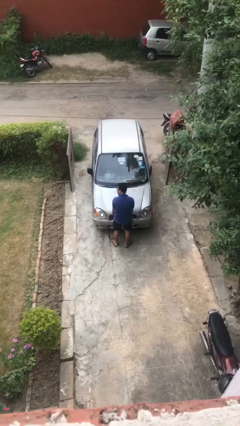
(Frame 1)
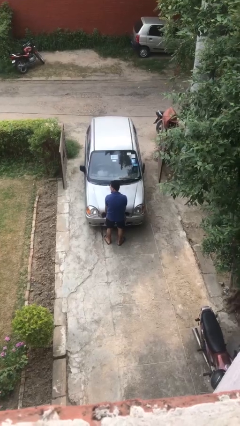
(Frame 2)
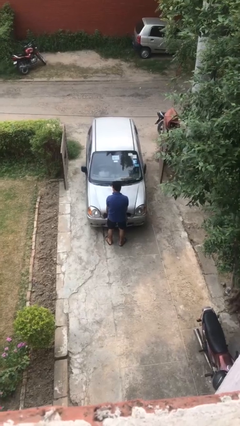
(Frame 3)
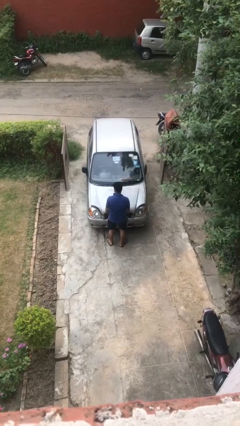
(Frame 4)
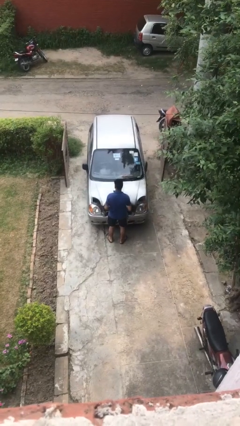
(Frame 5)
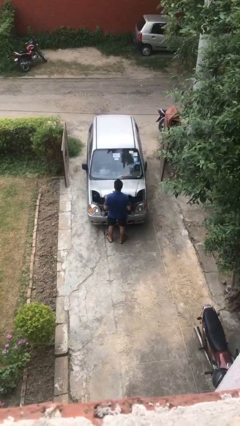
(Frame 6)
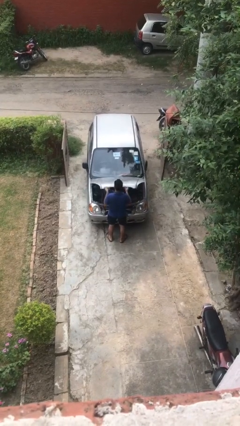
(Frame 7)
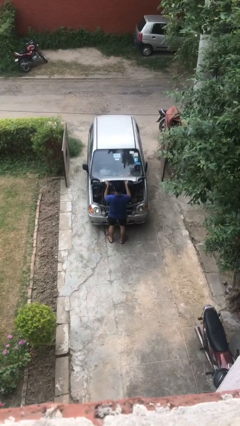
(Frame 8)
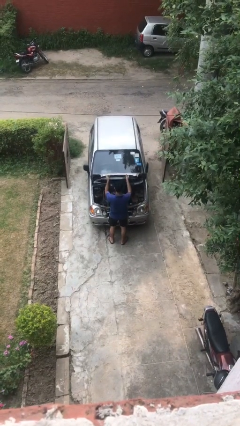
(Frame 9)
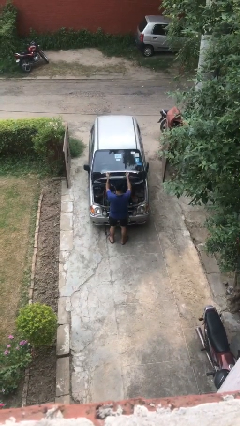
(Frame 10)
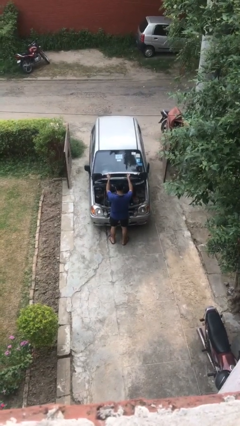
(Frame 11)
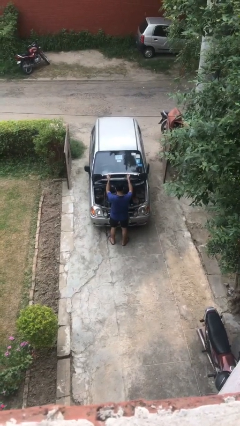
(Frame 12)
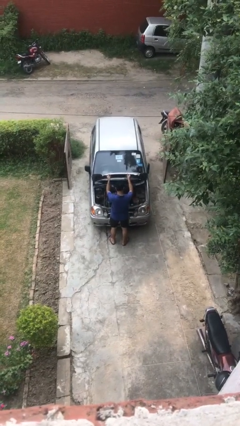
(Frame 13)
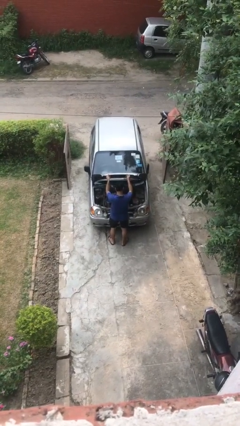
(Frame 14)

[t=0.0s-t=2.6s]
person opens car hood

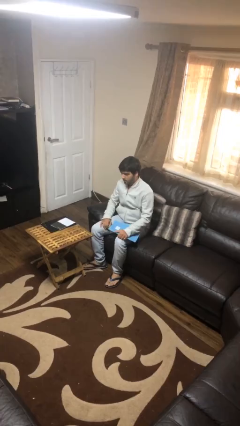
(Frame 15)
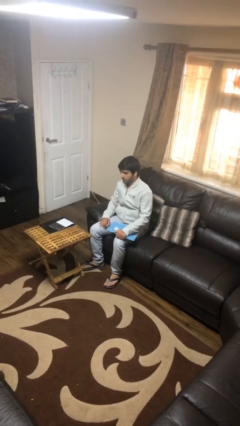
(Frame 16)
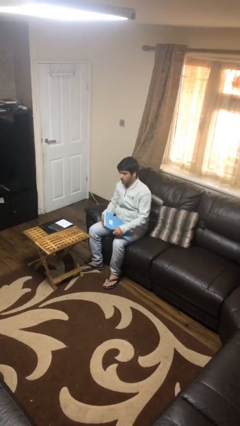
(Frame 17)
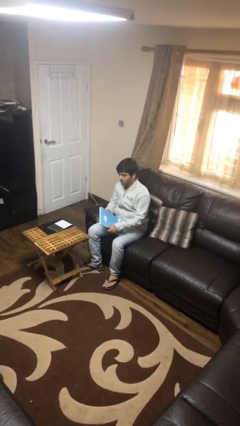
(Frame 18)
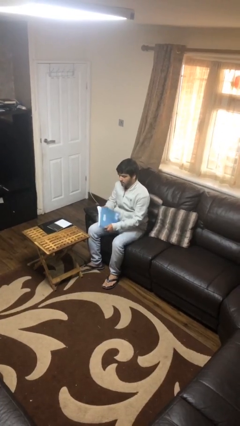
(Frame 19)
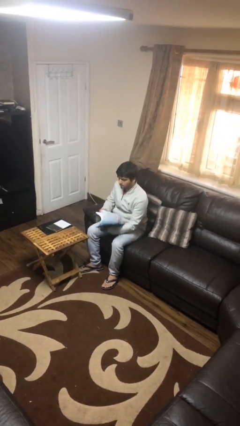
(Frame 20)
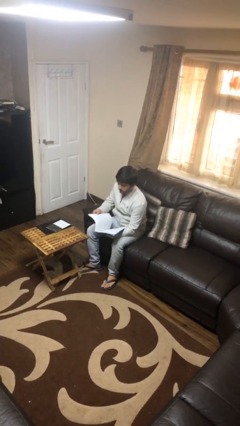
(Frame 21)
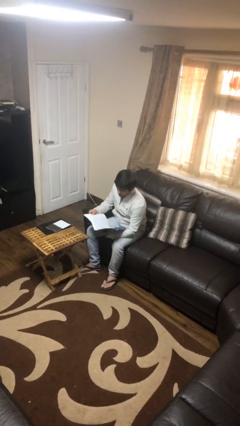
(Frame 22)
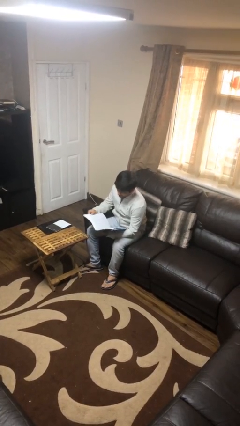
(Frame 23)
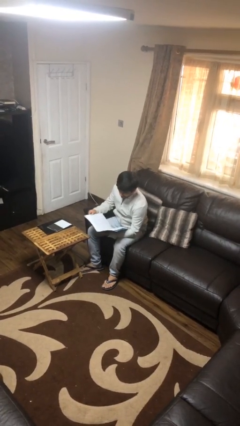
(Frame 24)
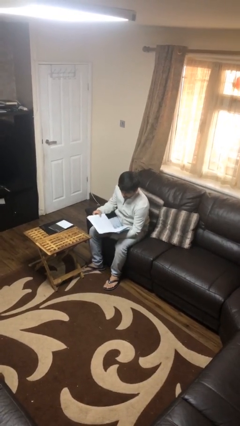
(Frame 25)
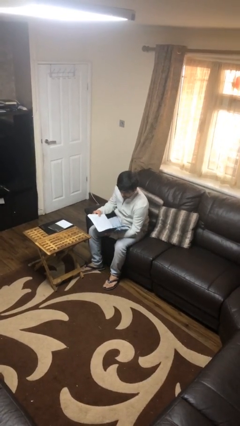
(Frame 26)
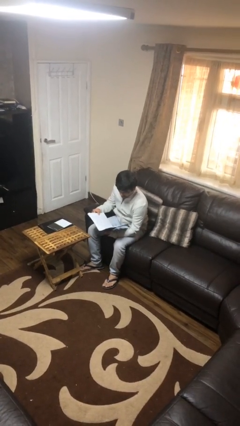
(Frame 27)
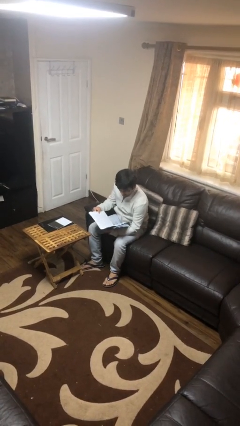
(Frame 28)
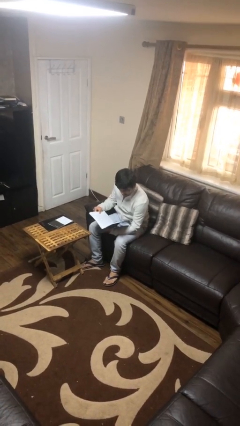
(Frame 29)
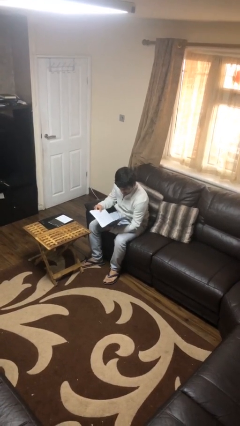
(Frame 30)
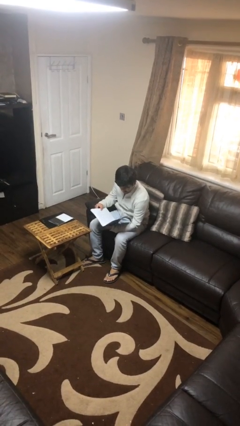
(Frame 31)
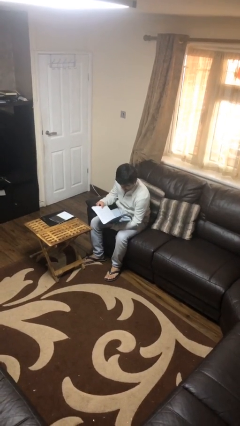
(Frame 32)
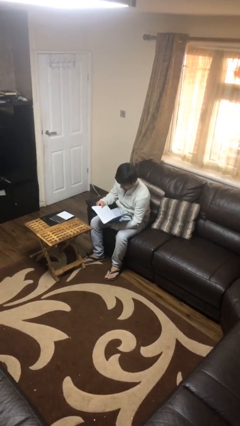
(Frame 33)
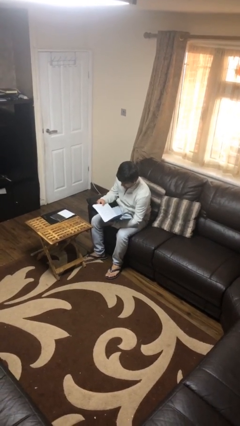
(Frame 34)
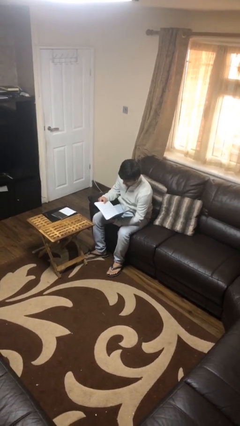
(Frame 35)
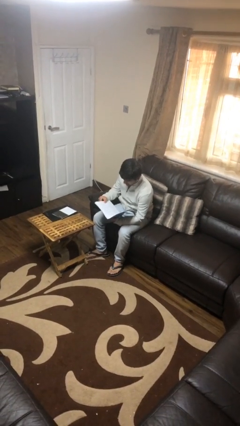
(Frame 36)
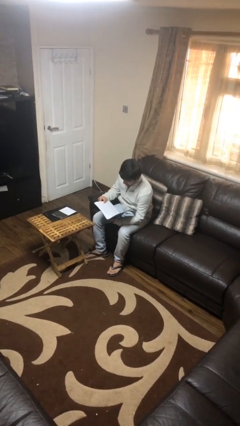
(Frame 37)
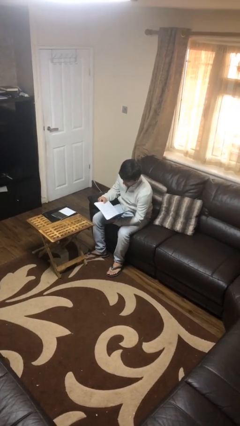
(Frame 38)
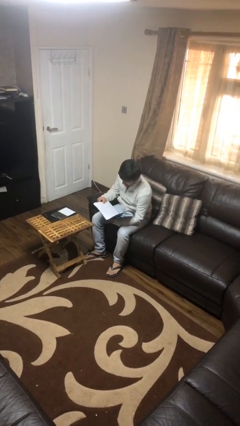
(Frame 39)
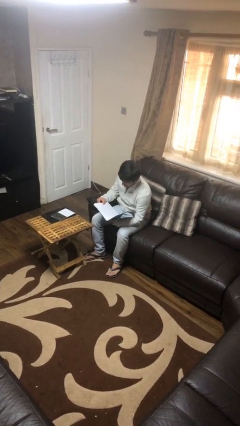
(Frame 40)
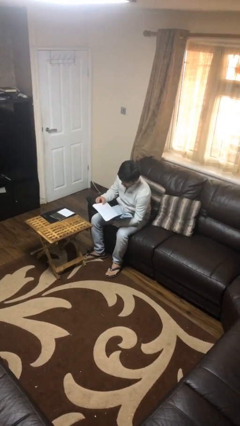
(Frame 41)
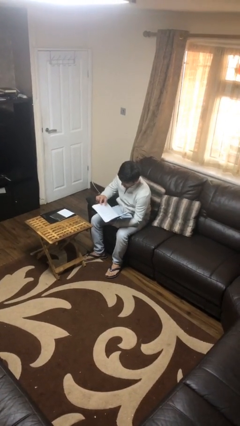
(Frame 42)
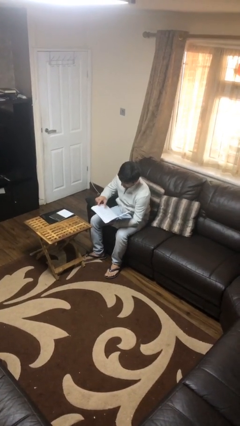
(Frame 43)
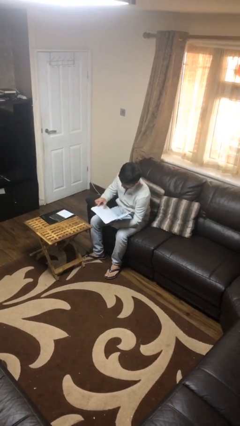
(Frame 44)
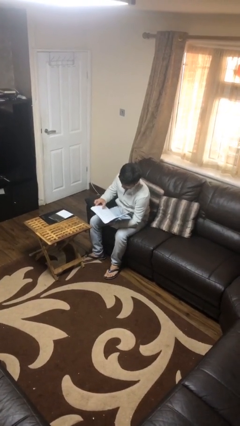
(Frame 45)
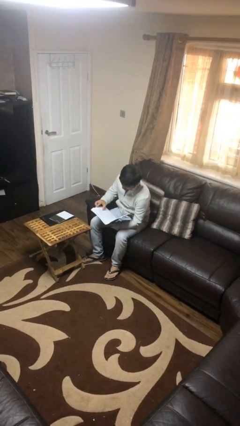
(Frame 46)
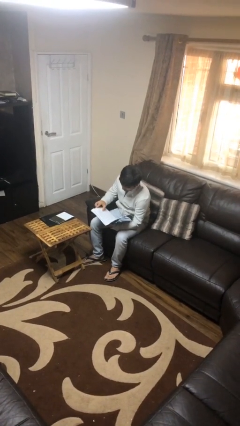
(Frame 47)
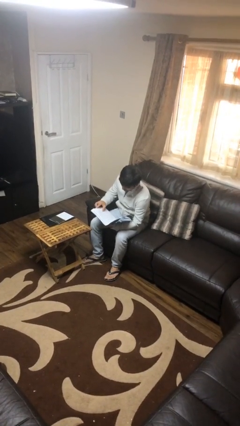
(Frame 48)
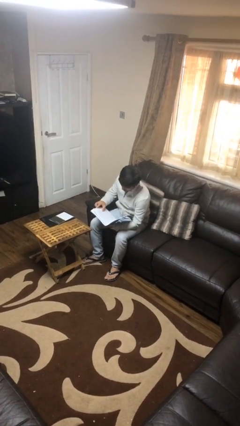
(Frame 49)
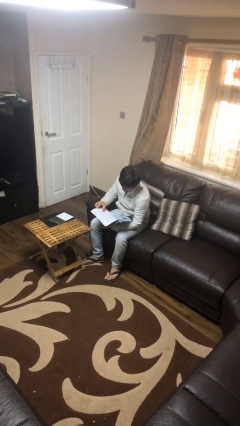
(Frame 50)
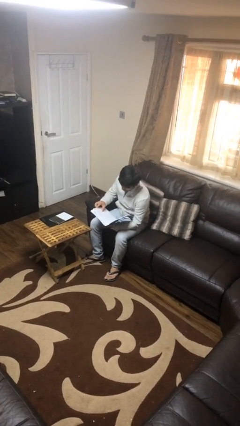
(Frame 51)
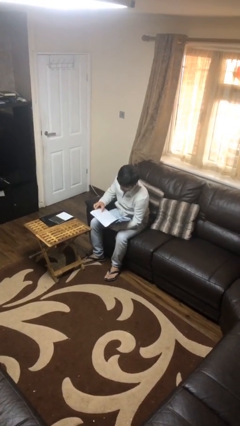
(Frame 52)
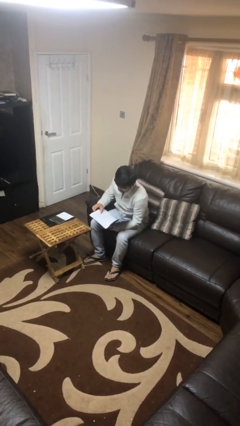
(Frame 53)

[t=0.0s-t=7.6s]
person reads document

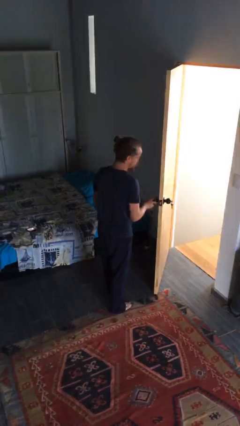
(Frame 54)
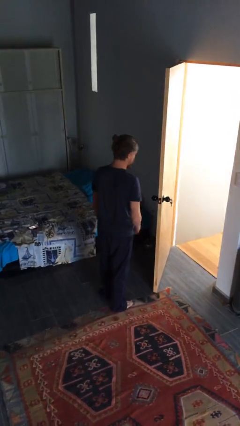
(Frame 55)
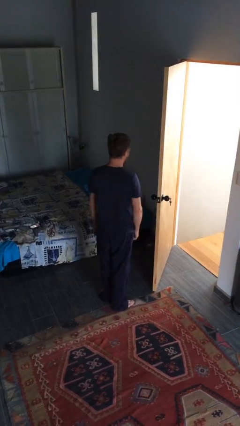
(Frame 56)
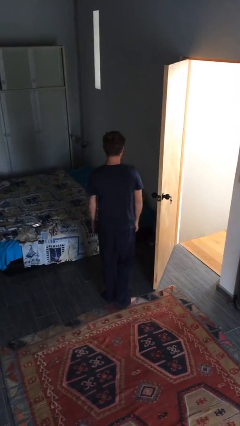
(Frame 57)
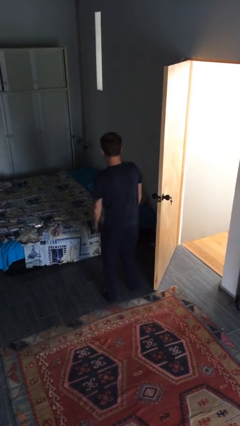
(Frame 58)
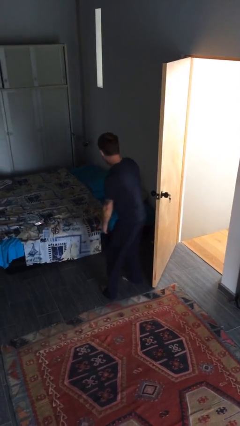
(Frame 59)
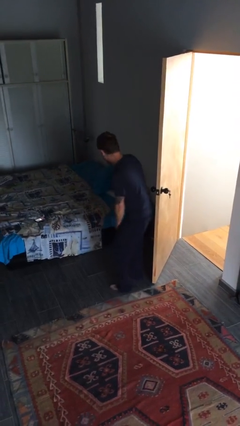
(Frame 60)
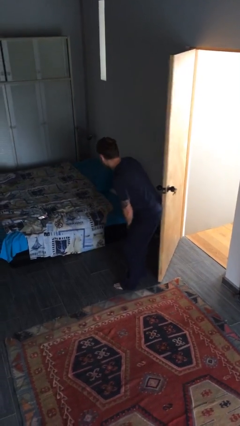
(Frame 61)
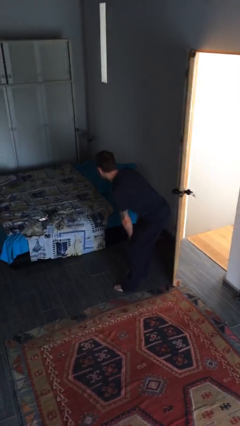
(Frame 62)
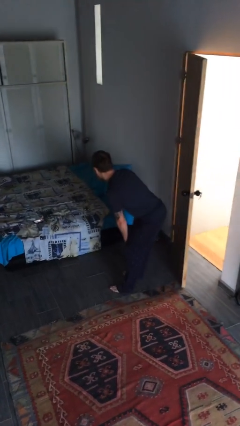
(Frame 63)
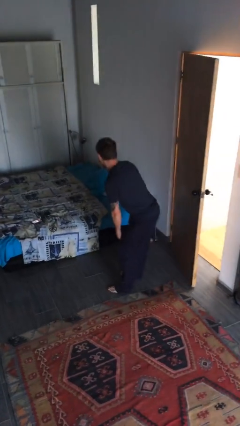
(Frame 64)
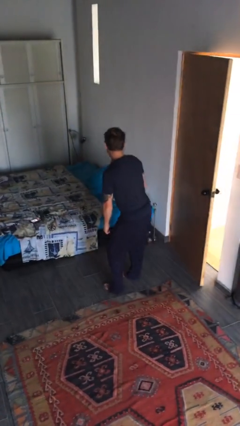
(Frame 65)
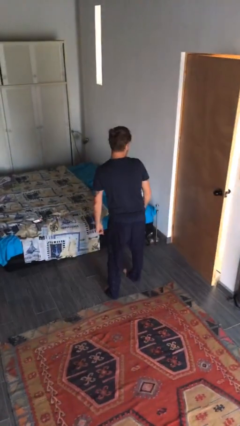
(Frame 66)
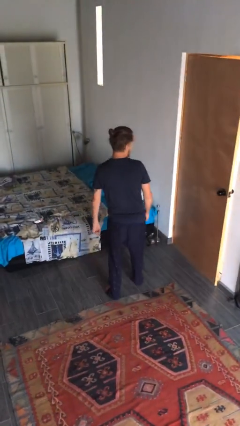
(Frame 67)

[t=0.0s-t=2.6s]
person closes door with hip

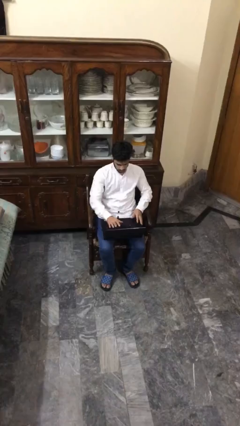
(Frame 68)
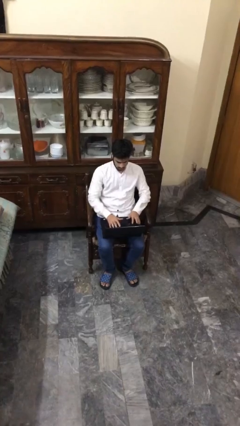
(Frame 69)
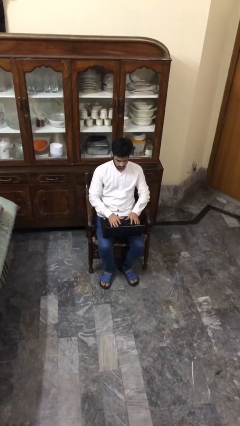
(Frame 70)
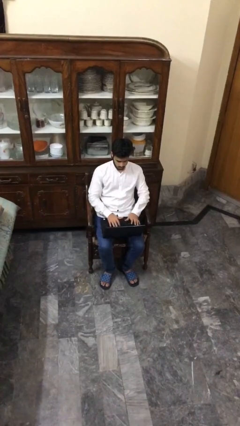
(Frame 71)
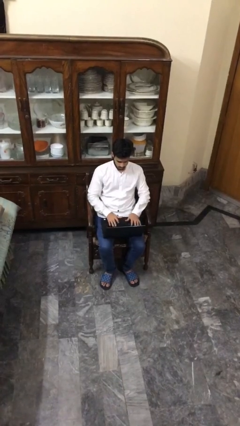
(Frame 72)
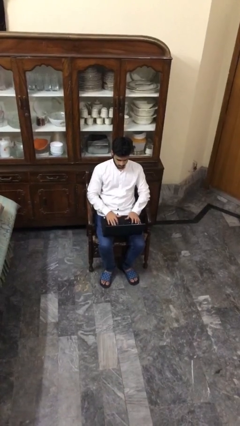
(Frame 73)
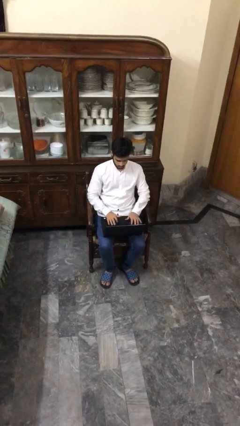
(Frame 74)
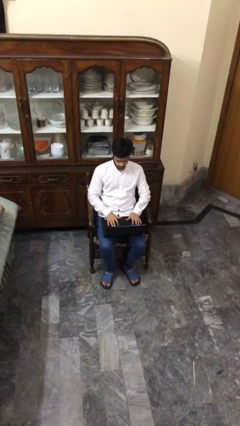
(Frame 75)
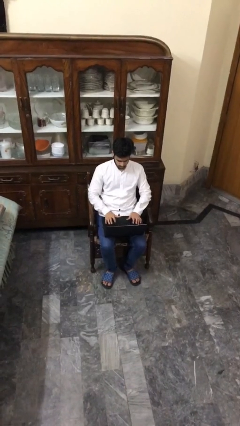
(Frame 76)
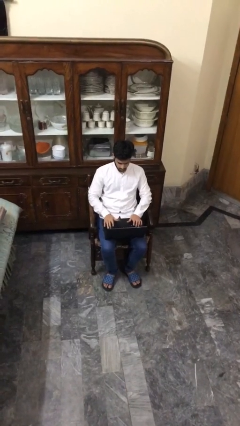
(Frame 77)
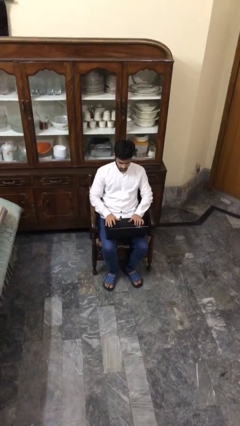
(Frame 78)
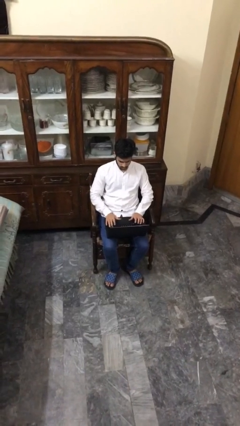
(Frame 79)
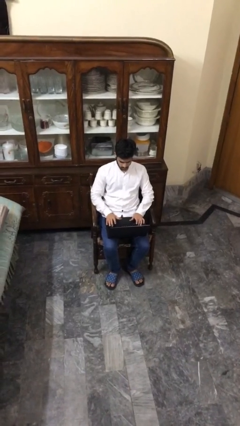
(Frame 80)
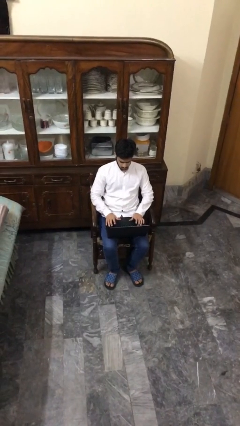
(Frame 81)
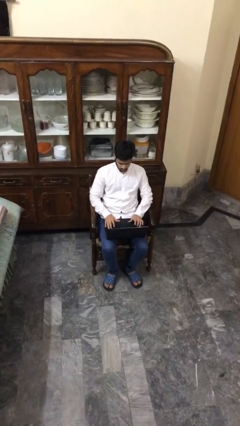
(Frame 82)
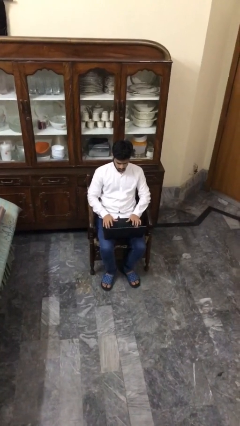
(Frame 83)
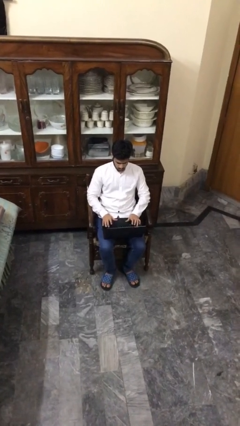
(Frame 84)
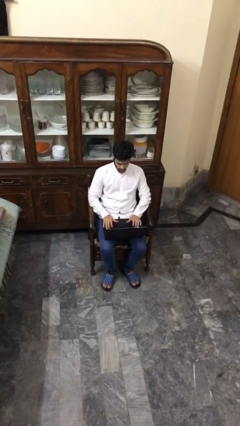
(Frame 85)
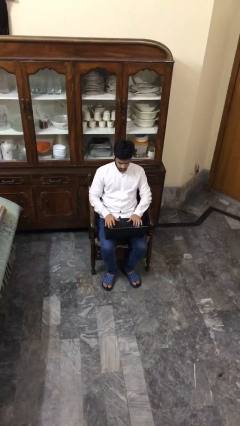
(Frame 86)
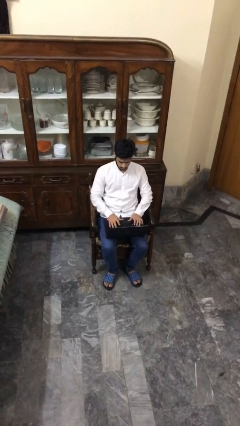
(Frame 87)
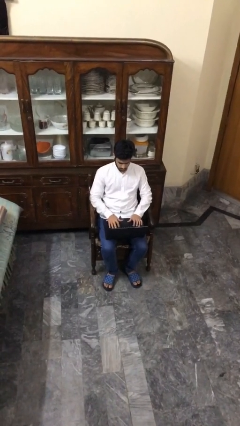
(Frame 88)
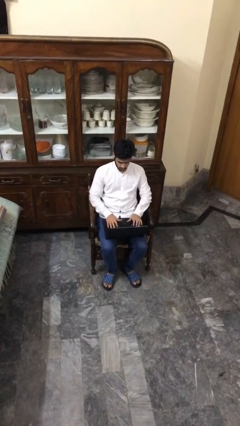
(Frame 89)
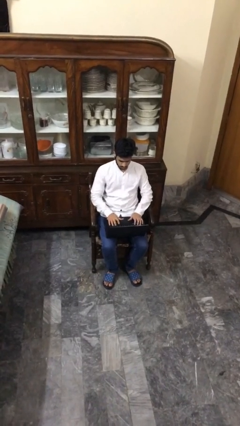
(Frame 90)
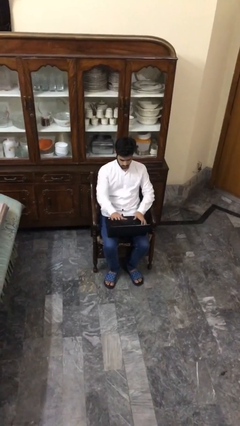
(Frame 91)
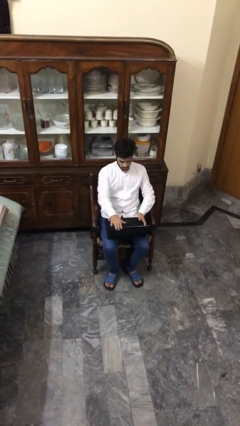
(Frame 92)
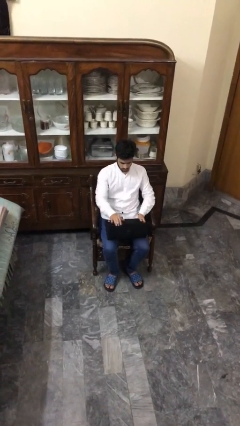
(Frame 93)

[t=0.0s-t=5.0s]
person interacts with laptop

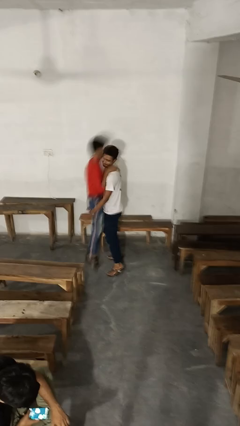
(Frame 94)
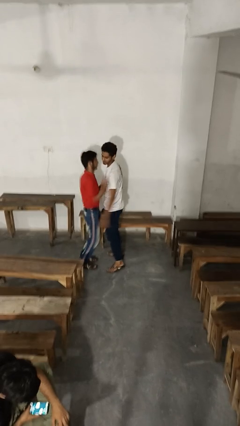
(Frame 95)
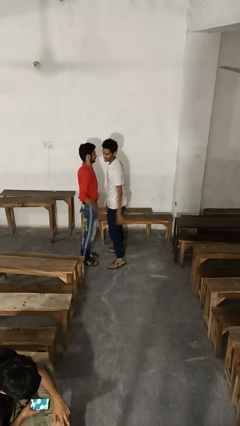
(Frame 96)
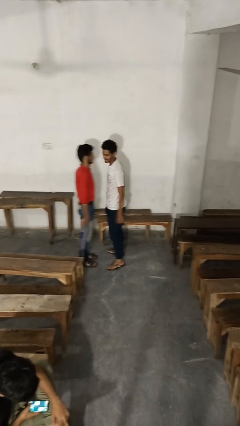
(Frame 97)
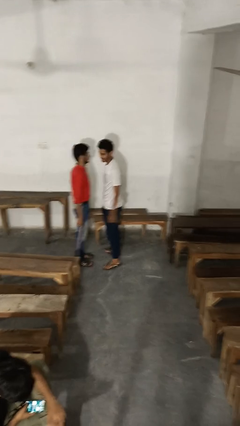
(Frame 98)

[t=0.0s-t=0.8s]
person puts down person
